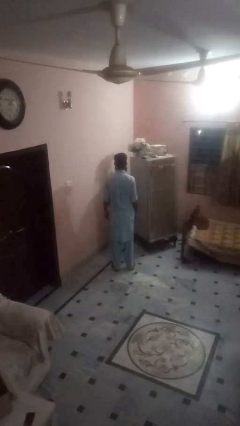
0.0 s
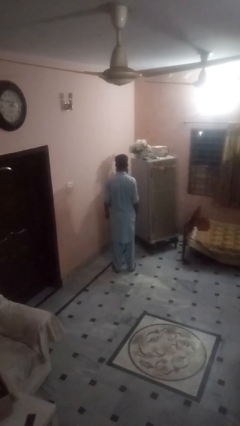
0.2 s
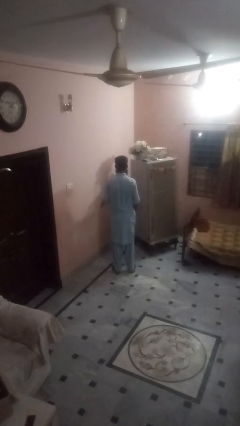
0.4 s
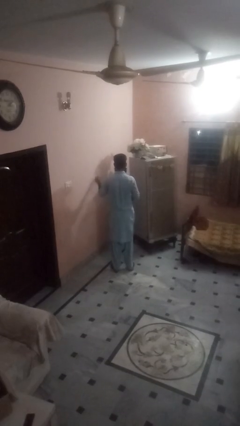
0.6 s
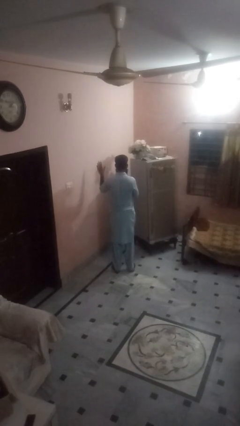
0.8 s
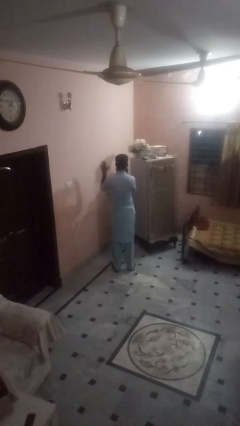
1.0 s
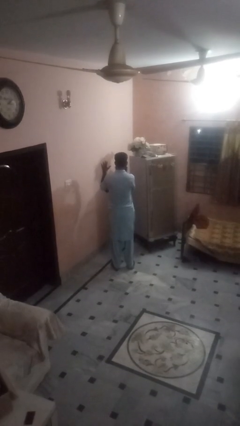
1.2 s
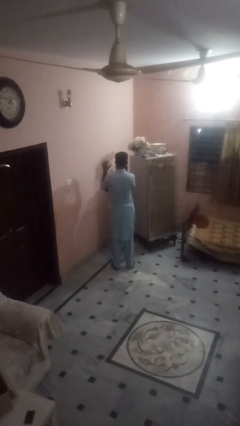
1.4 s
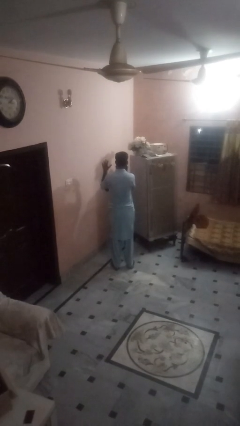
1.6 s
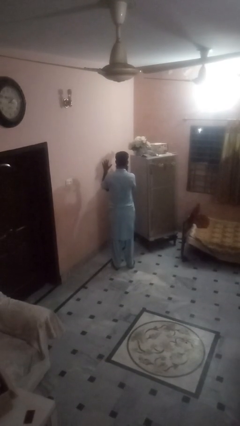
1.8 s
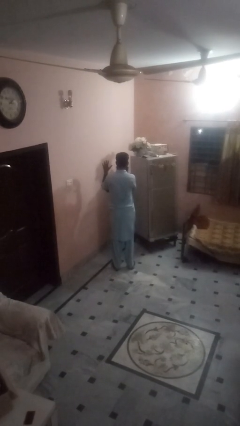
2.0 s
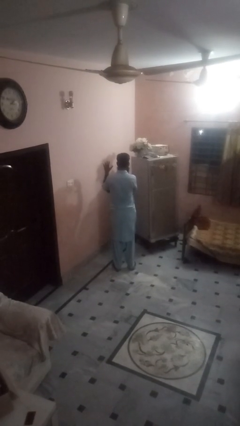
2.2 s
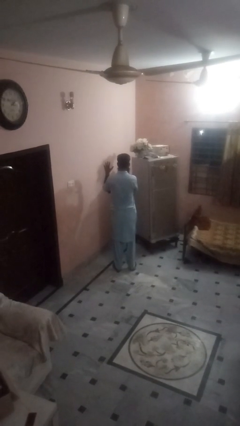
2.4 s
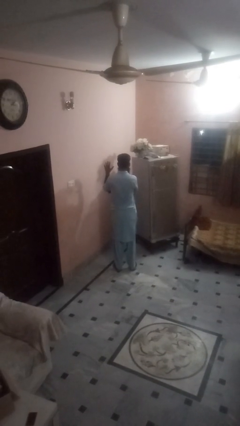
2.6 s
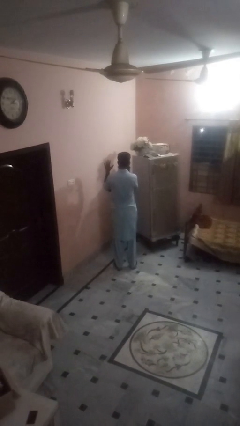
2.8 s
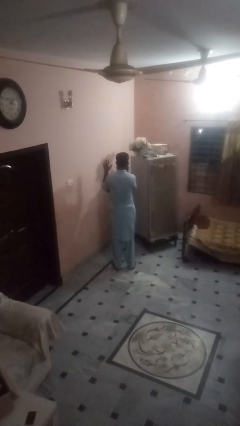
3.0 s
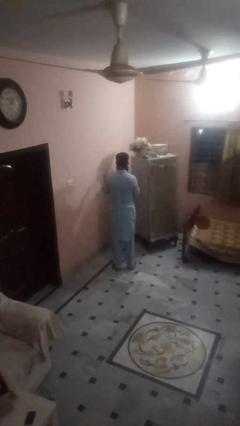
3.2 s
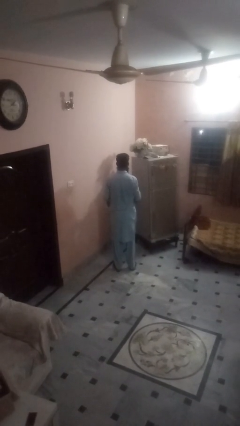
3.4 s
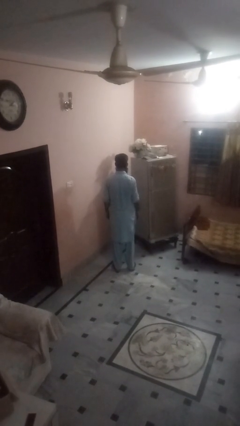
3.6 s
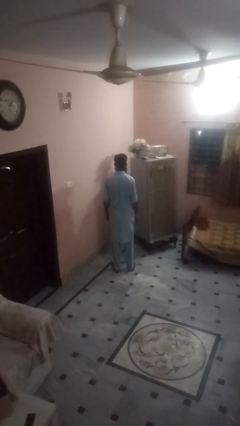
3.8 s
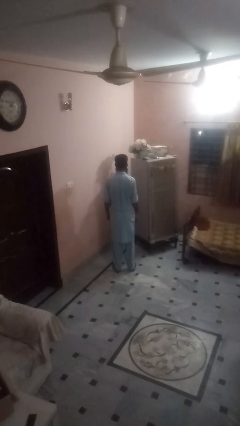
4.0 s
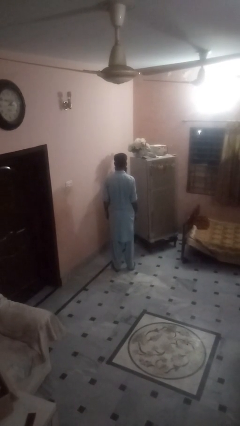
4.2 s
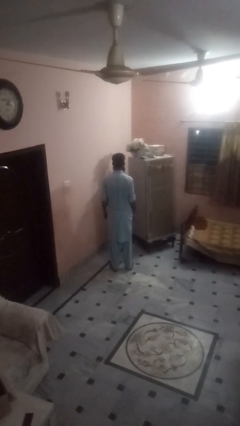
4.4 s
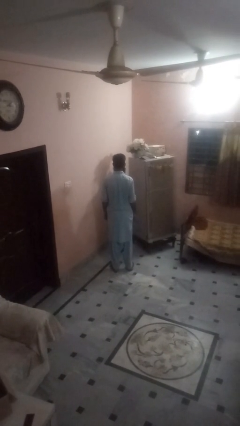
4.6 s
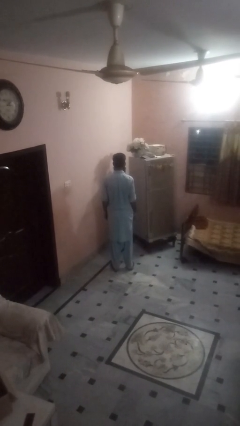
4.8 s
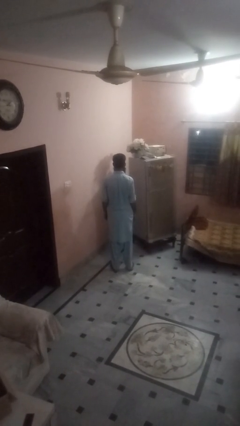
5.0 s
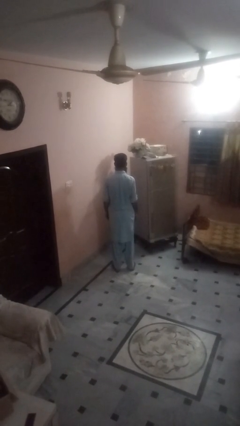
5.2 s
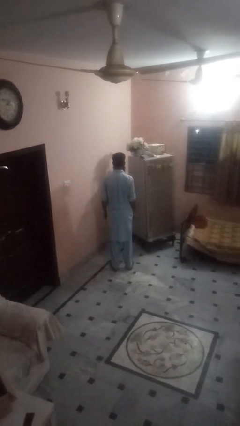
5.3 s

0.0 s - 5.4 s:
person gestures number five

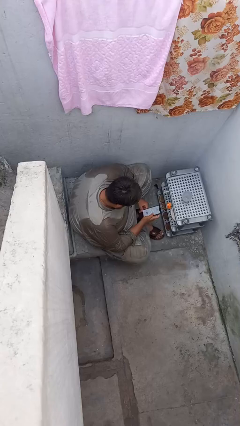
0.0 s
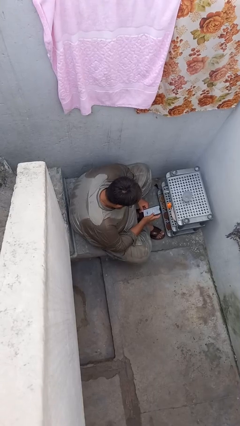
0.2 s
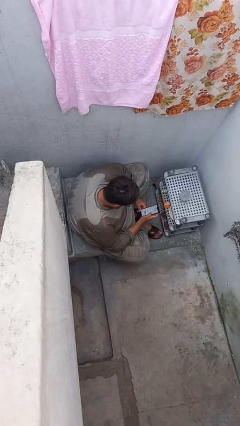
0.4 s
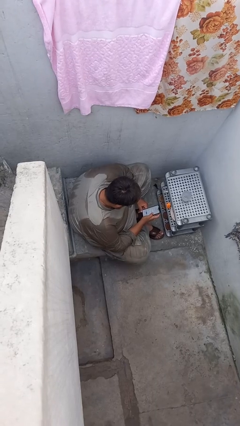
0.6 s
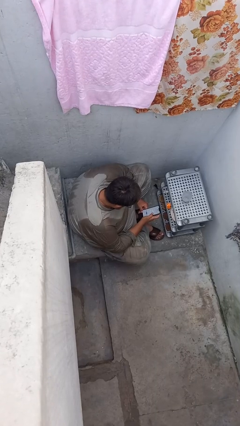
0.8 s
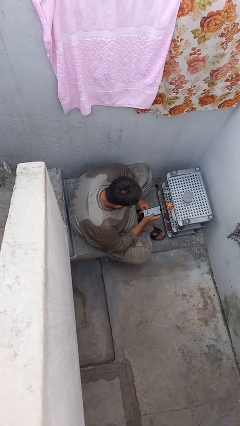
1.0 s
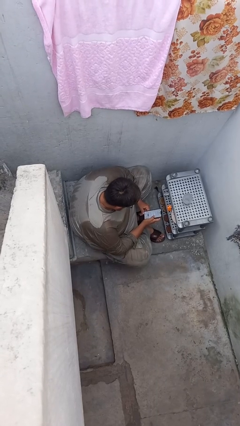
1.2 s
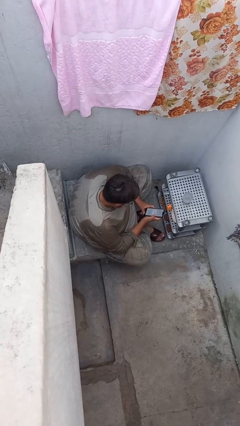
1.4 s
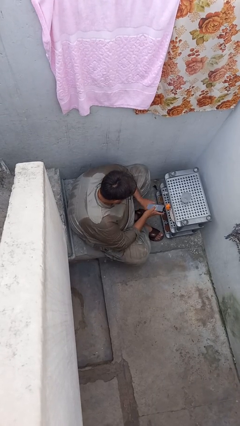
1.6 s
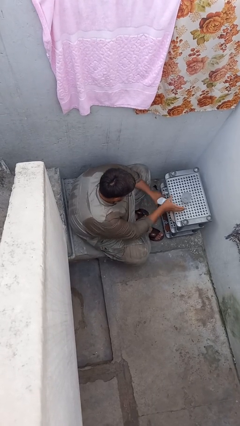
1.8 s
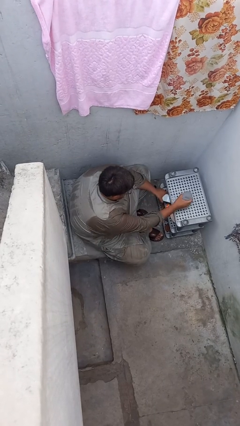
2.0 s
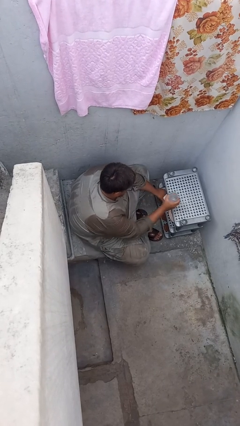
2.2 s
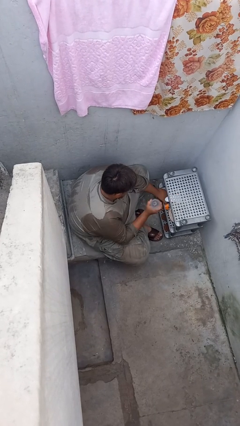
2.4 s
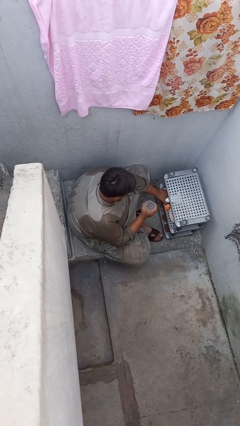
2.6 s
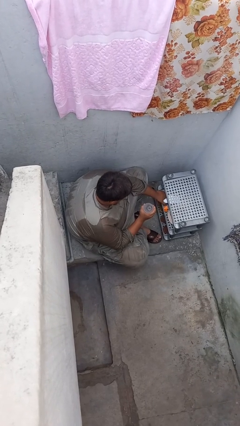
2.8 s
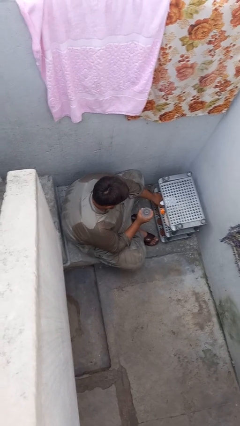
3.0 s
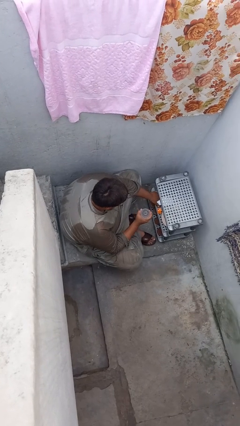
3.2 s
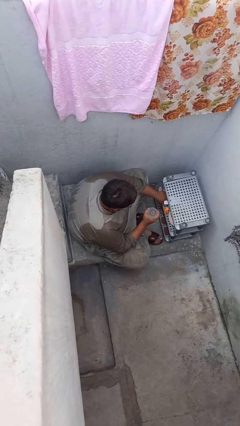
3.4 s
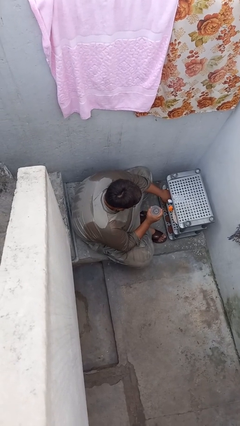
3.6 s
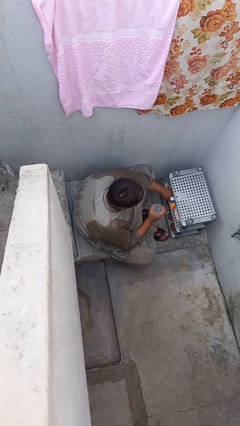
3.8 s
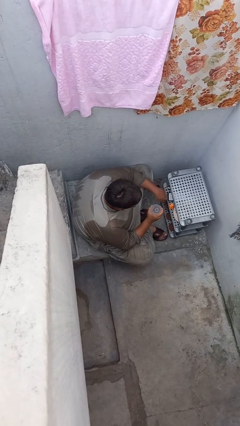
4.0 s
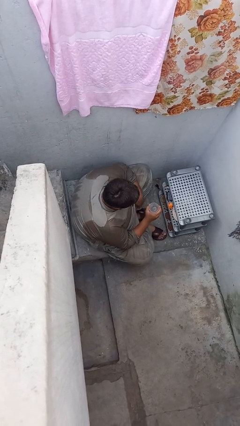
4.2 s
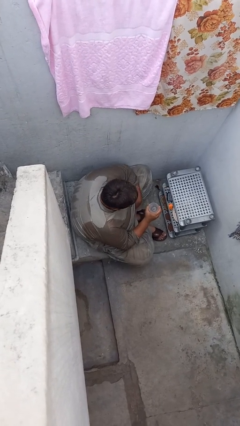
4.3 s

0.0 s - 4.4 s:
person picks up object from table

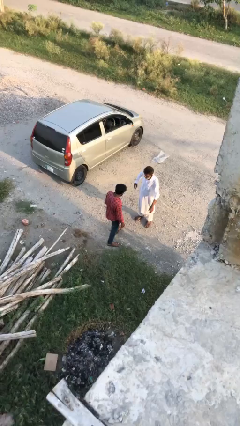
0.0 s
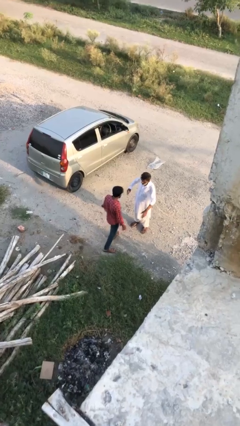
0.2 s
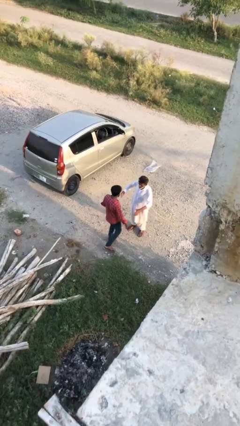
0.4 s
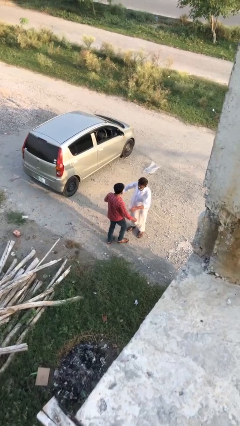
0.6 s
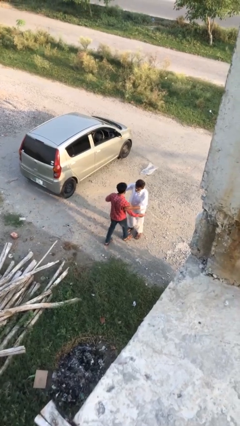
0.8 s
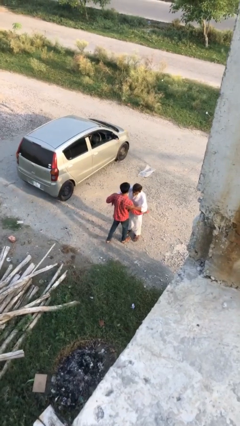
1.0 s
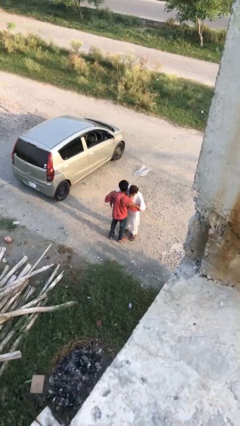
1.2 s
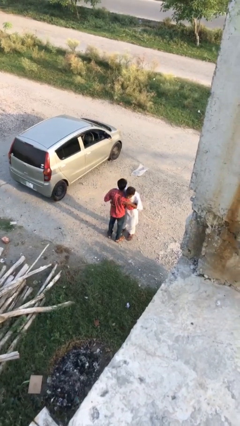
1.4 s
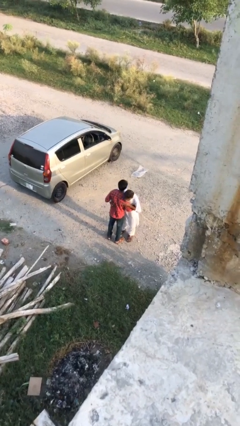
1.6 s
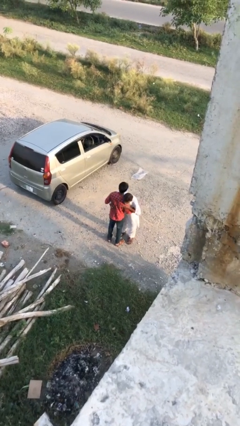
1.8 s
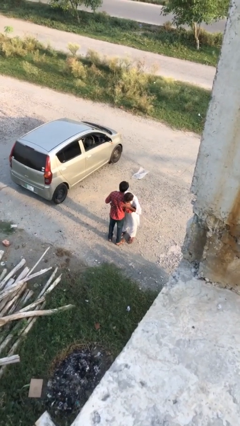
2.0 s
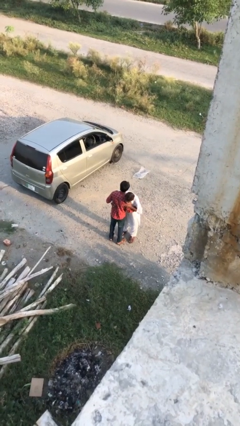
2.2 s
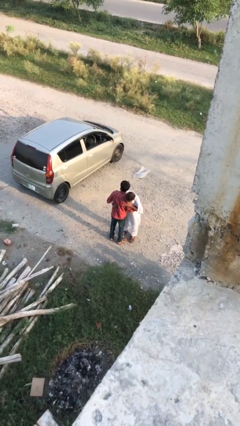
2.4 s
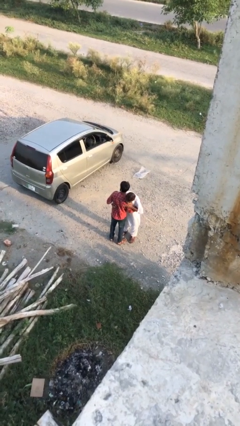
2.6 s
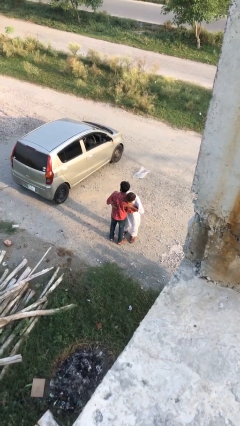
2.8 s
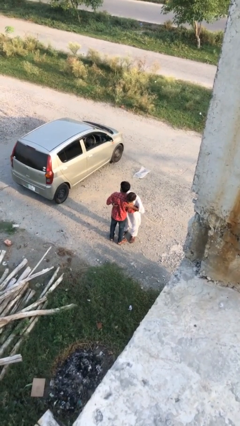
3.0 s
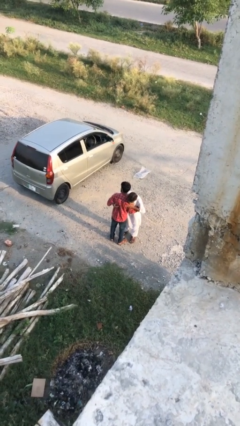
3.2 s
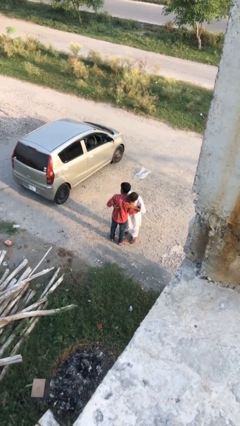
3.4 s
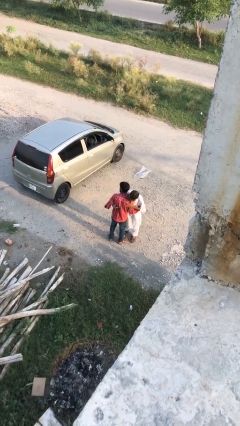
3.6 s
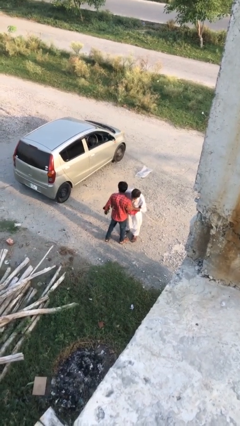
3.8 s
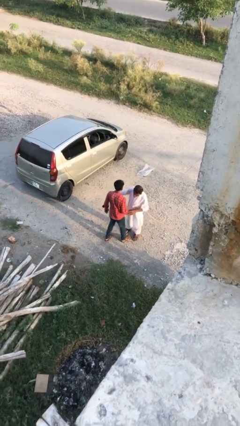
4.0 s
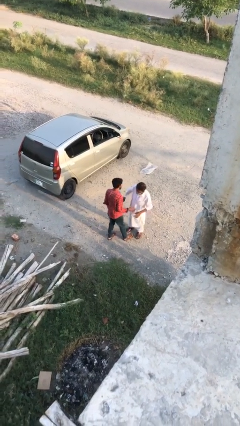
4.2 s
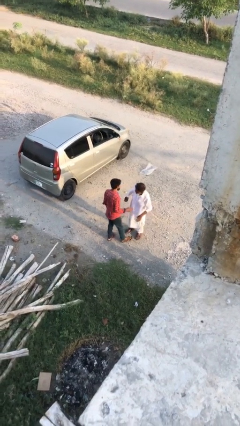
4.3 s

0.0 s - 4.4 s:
person embraces person

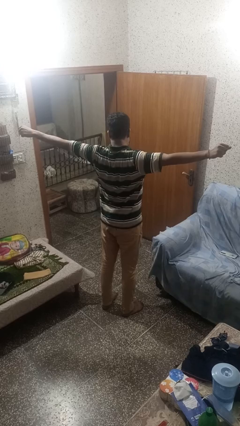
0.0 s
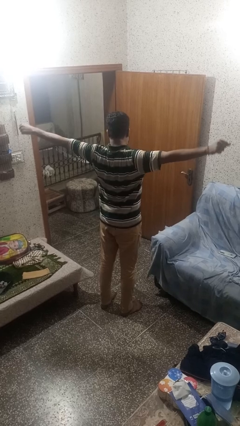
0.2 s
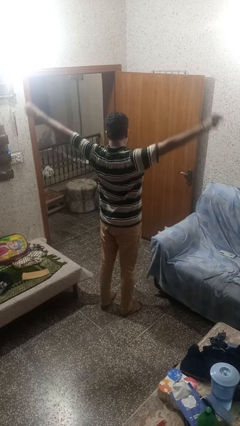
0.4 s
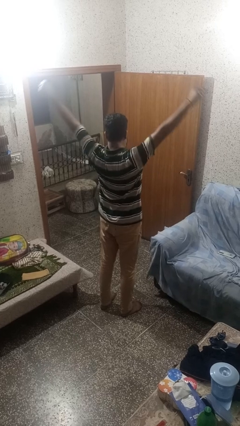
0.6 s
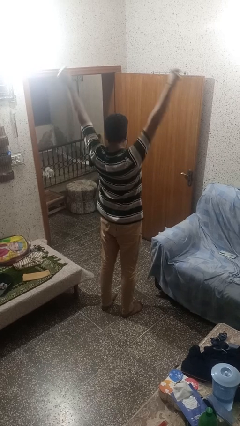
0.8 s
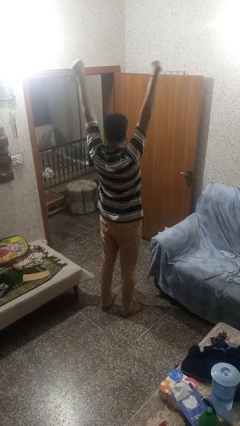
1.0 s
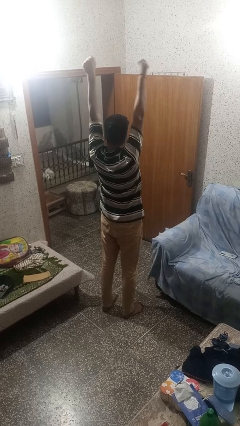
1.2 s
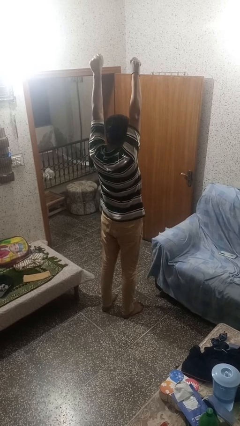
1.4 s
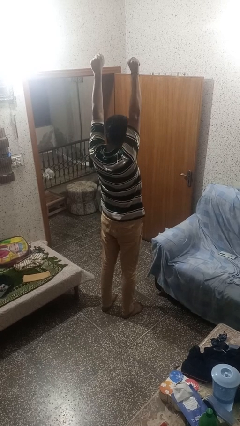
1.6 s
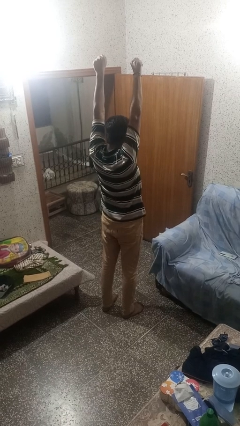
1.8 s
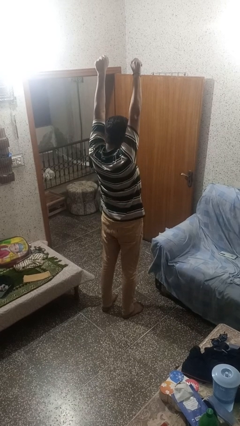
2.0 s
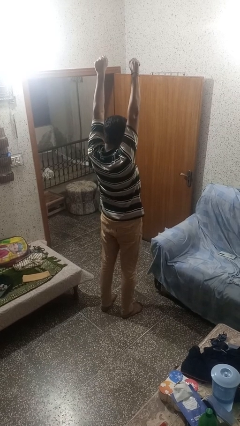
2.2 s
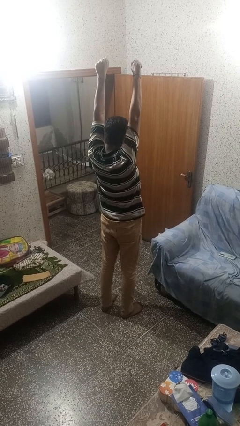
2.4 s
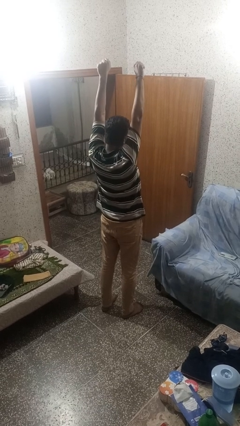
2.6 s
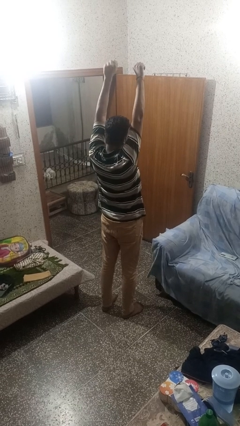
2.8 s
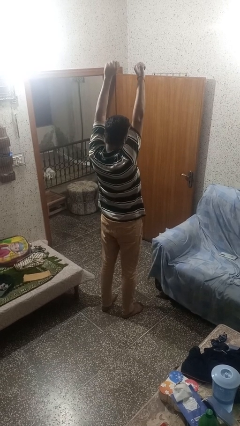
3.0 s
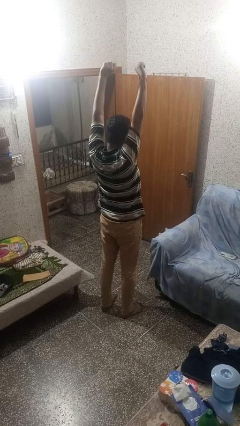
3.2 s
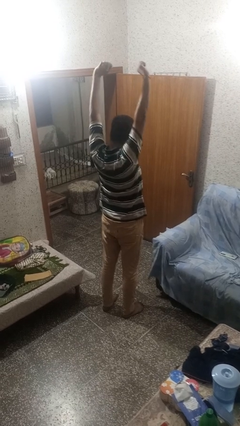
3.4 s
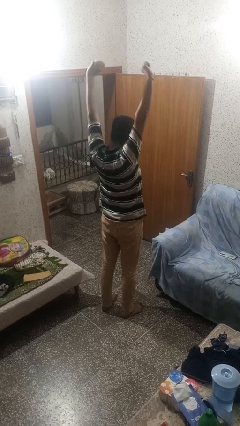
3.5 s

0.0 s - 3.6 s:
person stretches arms over head
